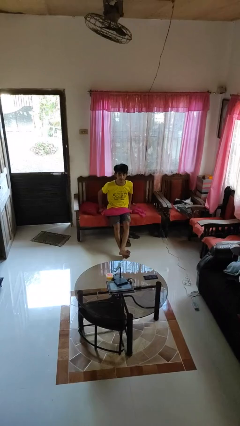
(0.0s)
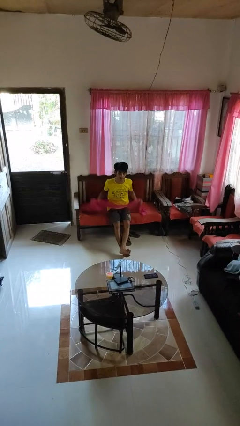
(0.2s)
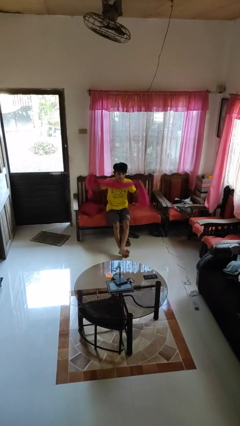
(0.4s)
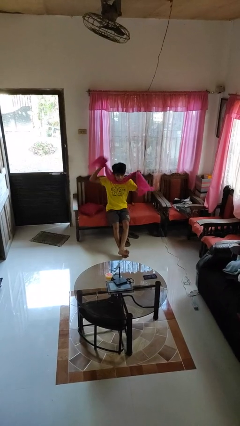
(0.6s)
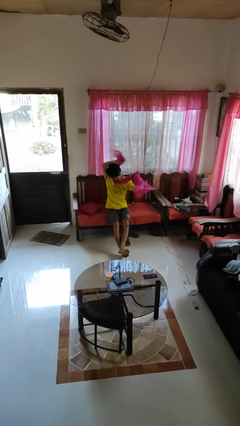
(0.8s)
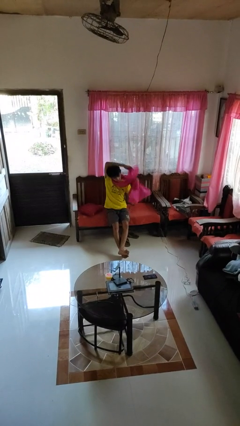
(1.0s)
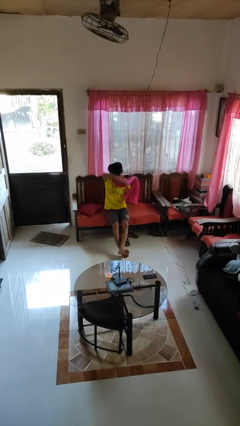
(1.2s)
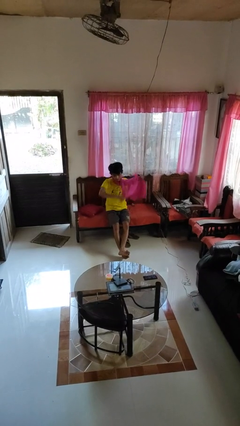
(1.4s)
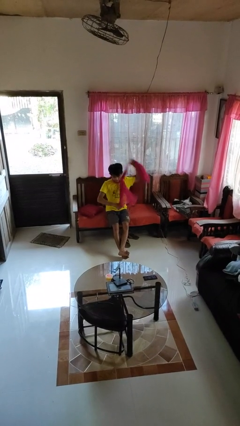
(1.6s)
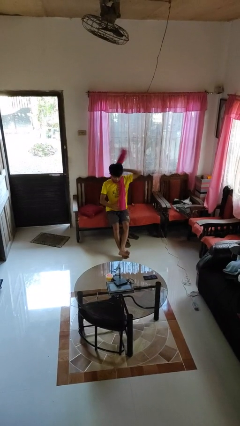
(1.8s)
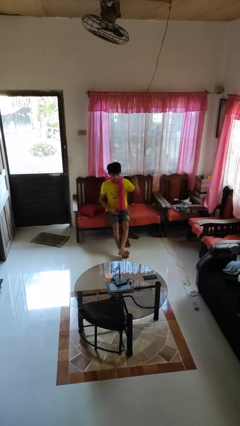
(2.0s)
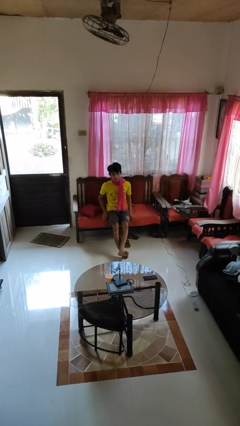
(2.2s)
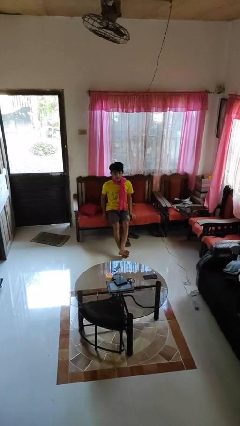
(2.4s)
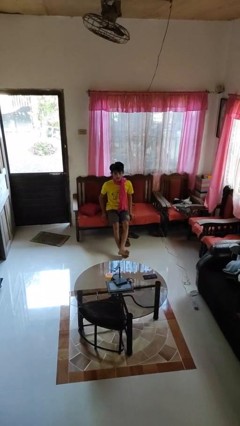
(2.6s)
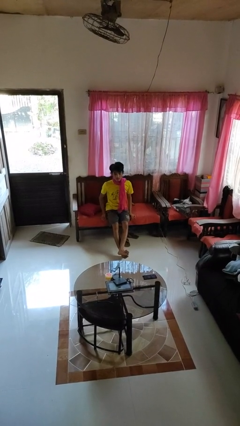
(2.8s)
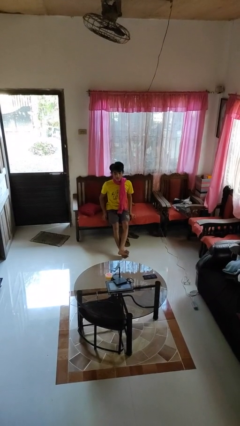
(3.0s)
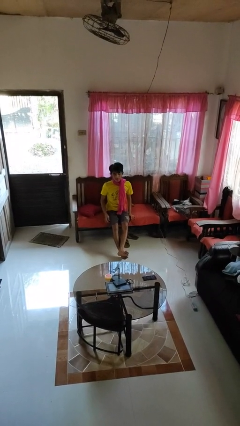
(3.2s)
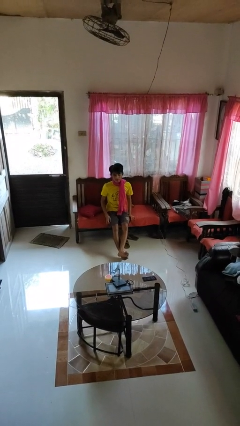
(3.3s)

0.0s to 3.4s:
person puts on scarf

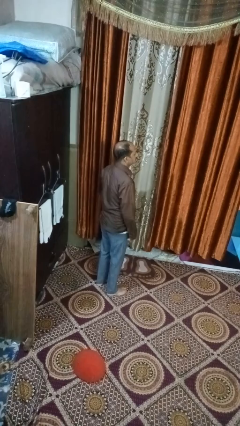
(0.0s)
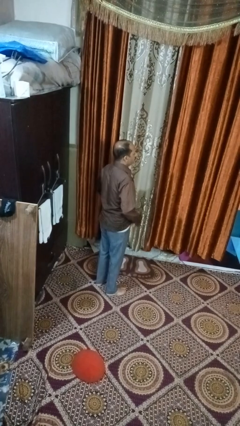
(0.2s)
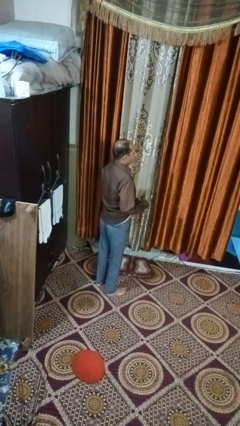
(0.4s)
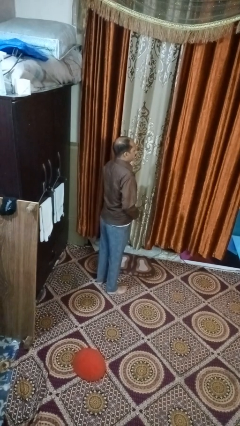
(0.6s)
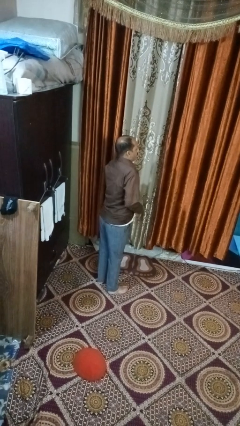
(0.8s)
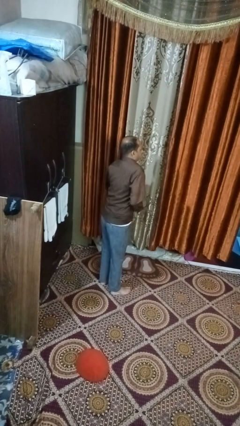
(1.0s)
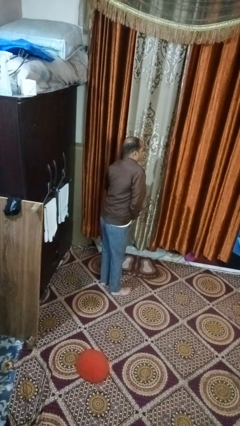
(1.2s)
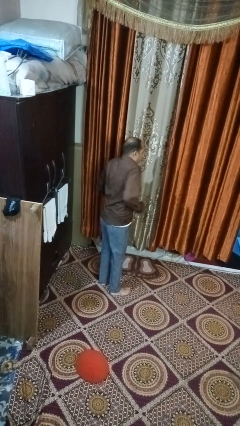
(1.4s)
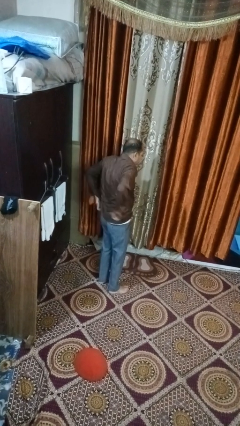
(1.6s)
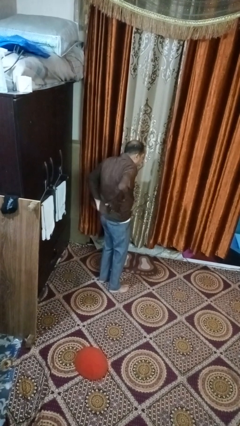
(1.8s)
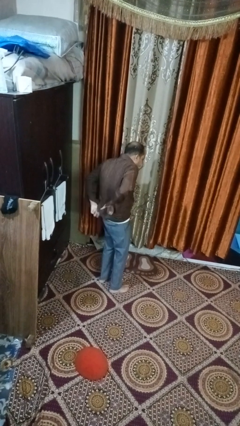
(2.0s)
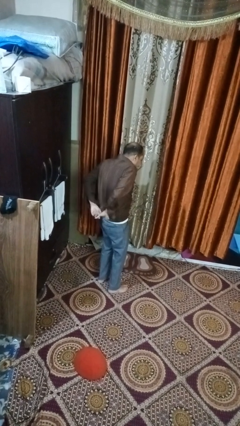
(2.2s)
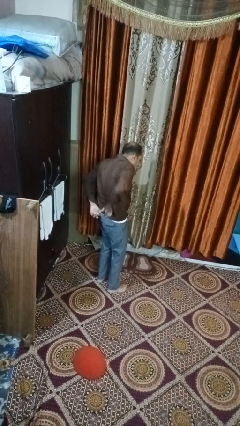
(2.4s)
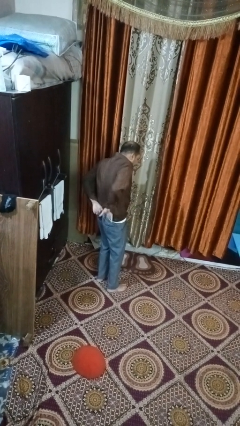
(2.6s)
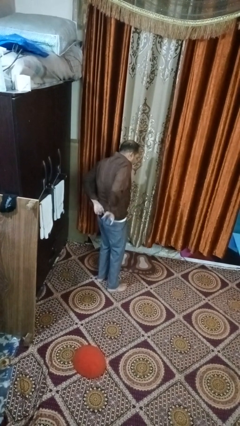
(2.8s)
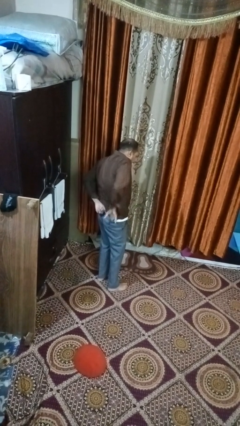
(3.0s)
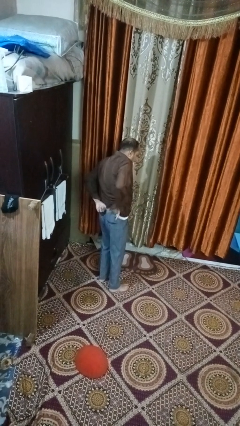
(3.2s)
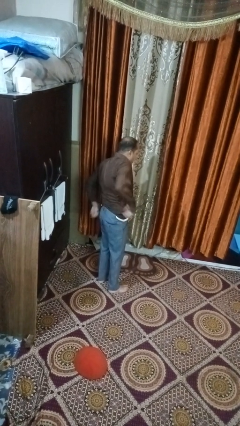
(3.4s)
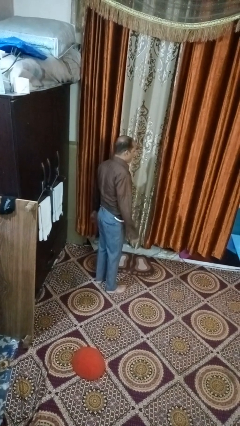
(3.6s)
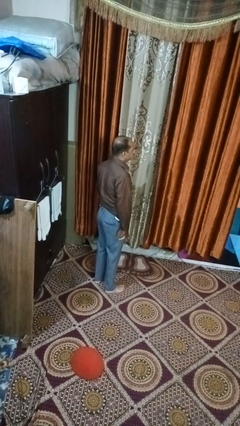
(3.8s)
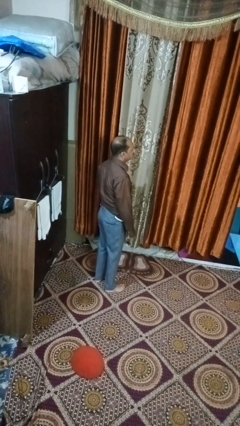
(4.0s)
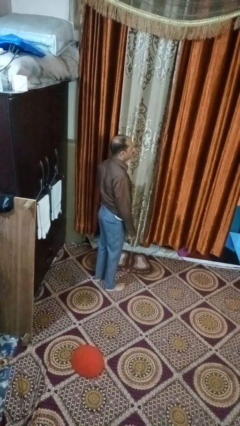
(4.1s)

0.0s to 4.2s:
person tucks in shirt

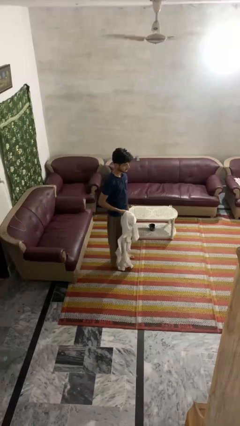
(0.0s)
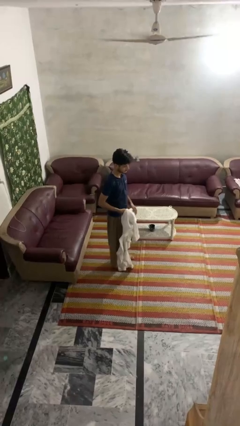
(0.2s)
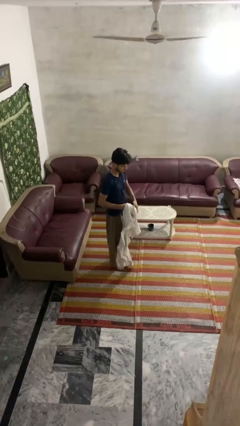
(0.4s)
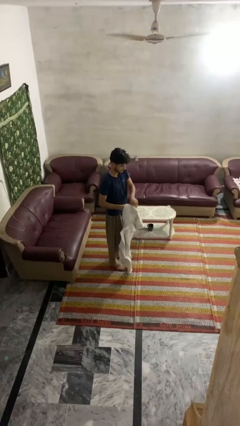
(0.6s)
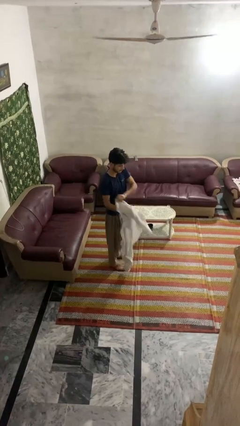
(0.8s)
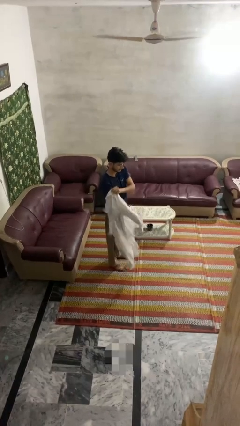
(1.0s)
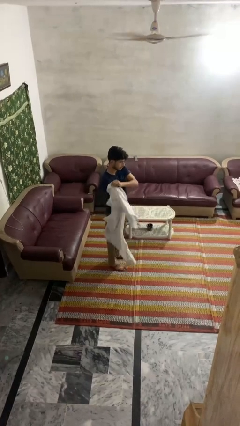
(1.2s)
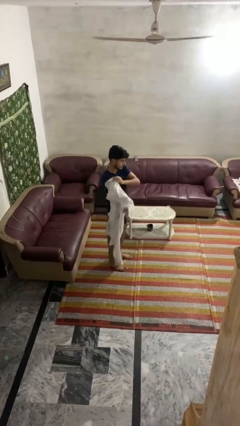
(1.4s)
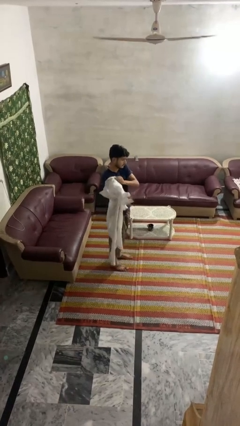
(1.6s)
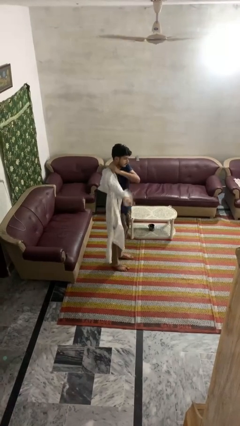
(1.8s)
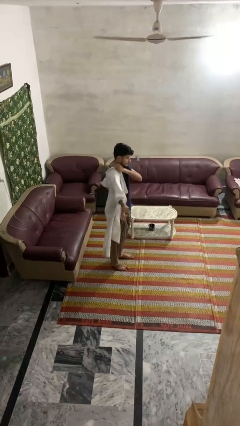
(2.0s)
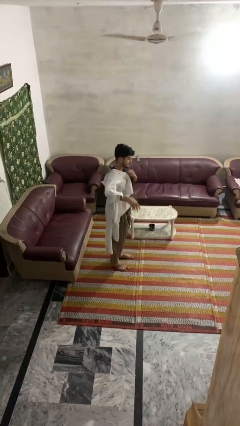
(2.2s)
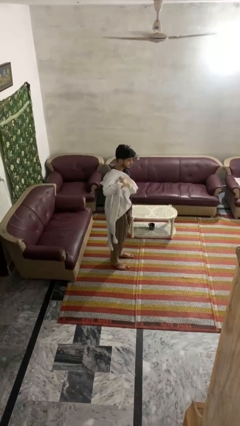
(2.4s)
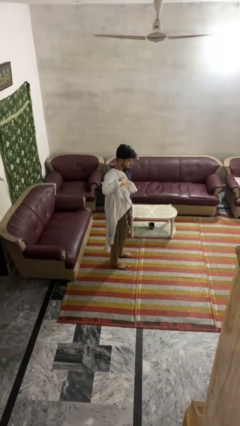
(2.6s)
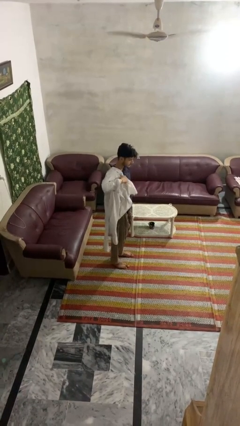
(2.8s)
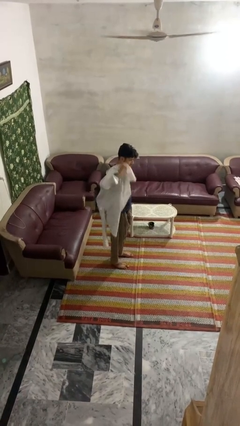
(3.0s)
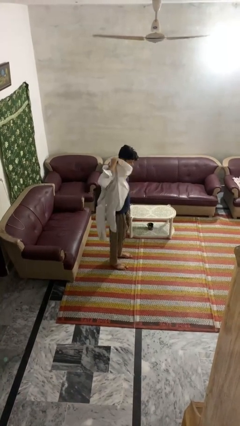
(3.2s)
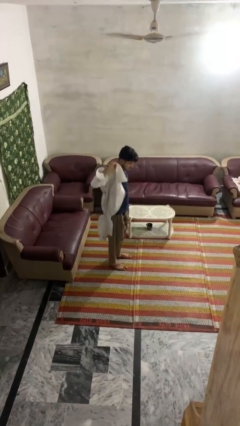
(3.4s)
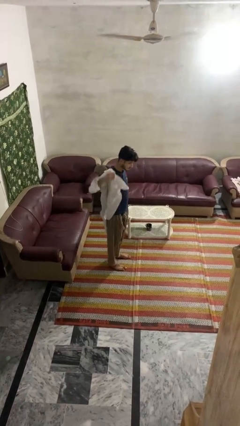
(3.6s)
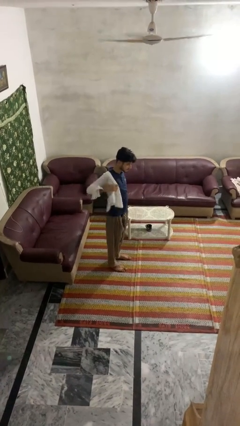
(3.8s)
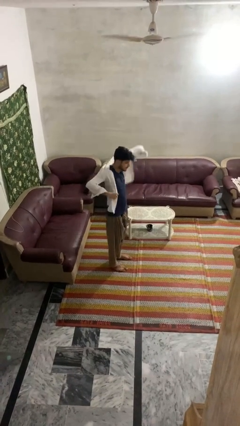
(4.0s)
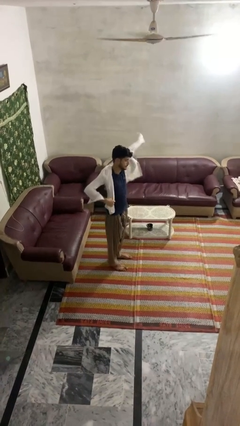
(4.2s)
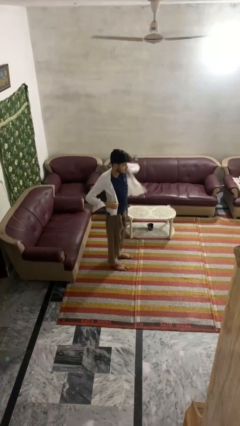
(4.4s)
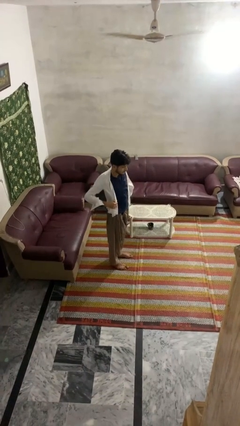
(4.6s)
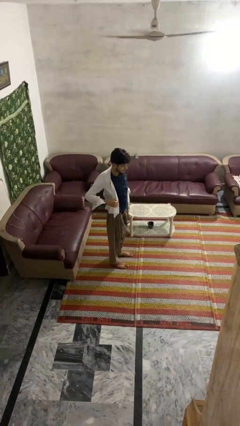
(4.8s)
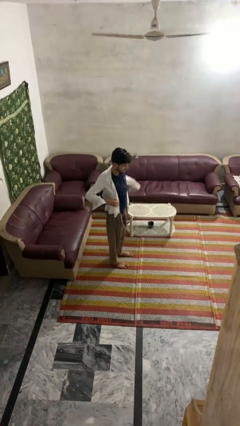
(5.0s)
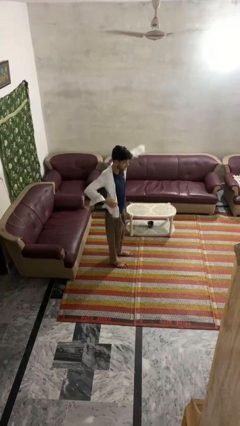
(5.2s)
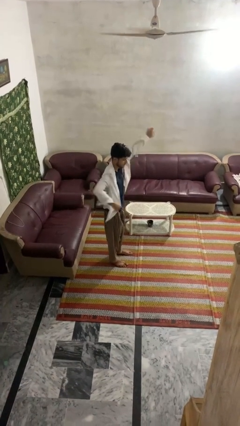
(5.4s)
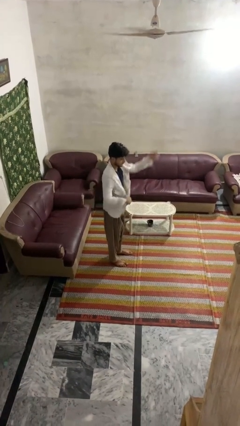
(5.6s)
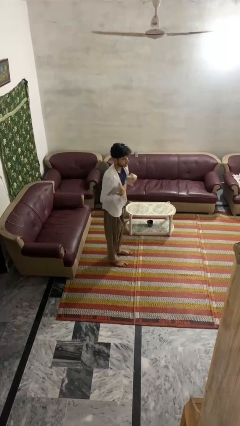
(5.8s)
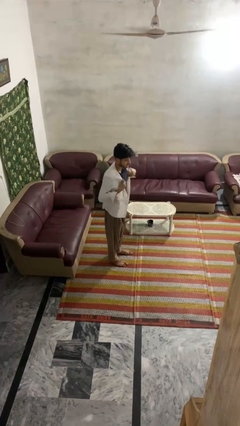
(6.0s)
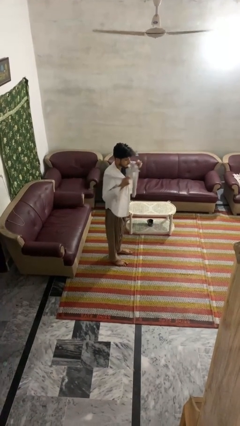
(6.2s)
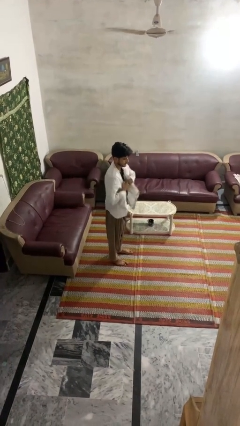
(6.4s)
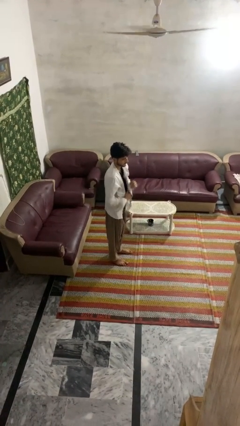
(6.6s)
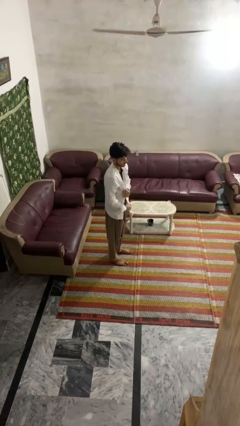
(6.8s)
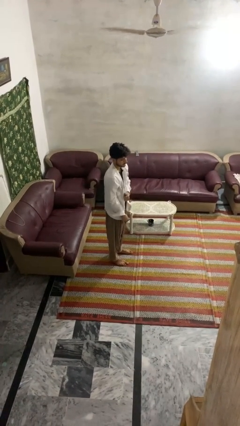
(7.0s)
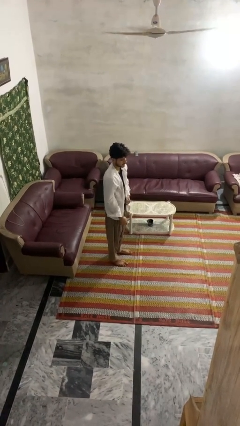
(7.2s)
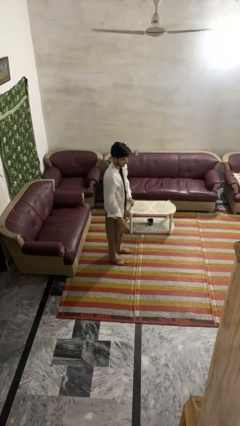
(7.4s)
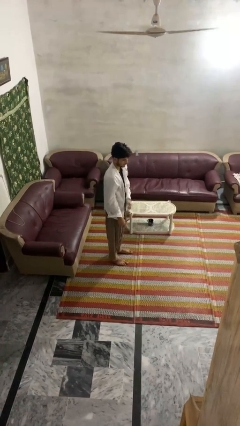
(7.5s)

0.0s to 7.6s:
person puts on shirt

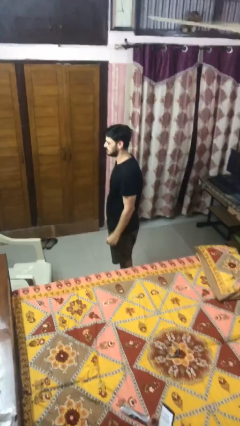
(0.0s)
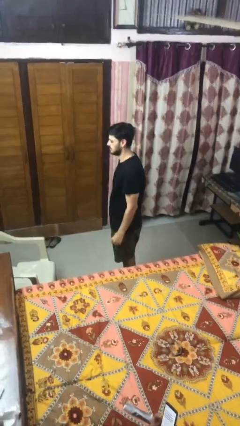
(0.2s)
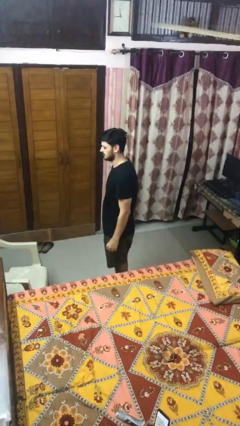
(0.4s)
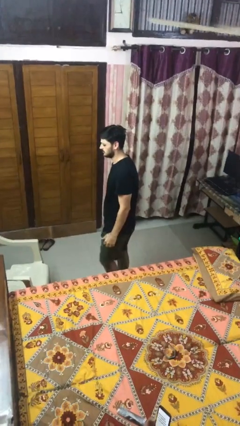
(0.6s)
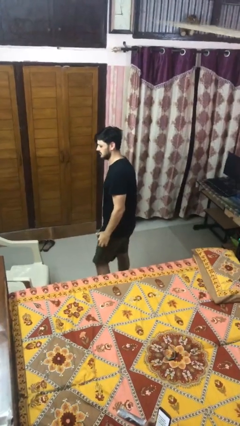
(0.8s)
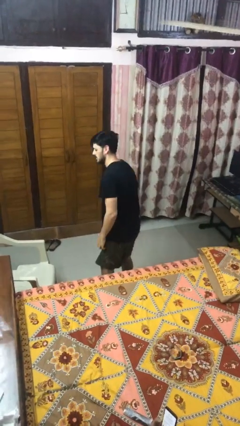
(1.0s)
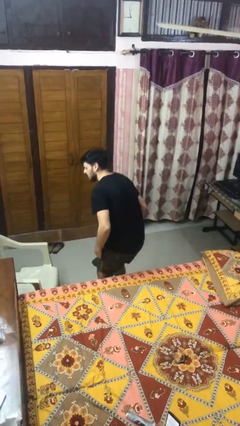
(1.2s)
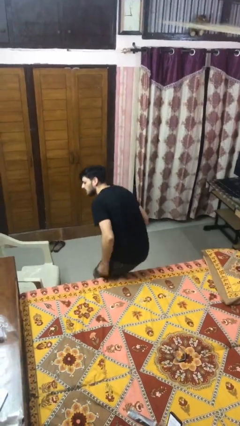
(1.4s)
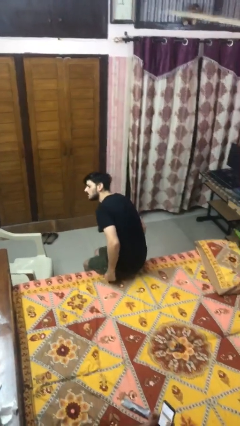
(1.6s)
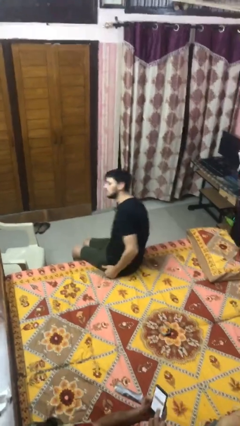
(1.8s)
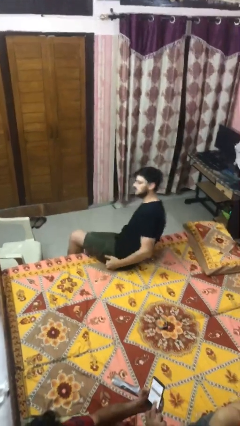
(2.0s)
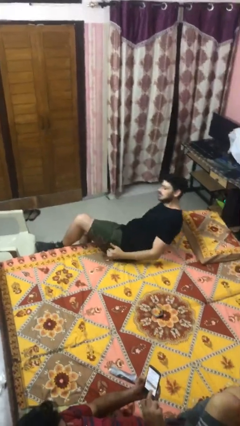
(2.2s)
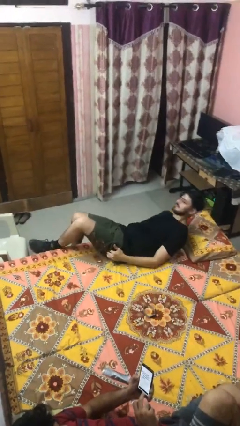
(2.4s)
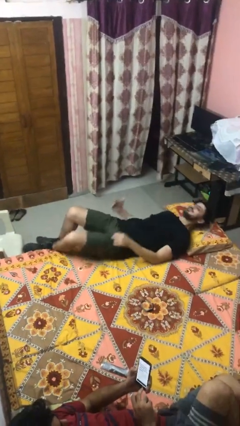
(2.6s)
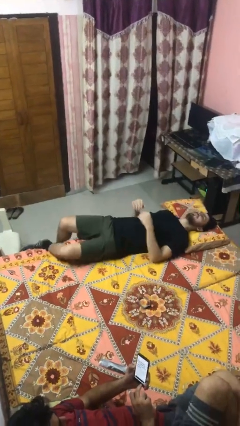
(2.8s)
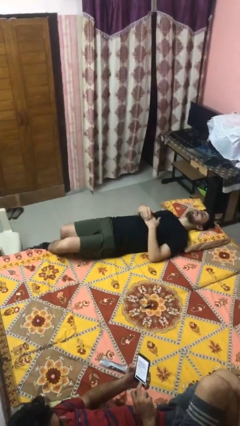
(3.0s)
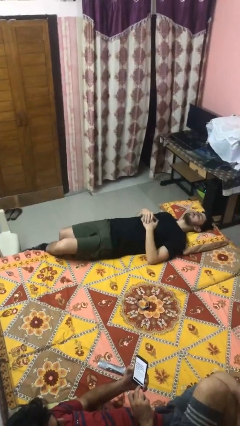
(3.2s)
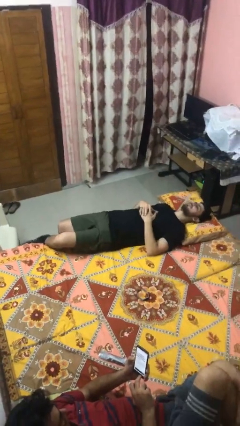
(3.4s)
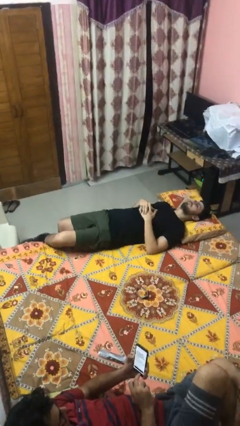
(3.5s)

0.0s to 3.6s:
person lies down on bed
